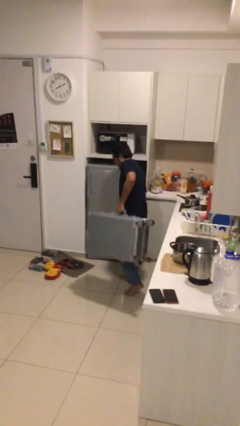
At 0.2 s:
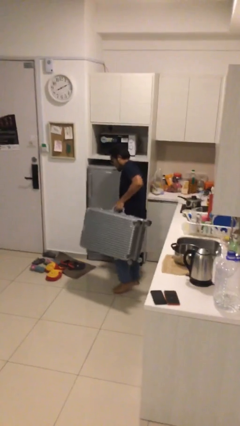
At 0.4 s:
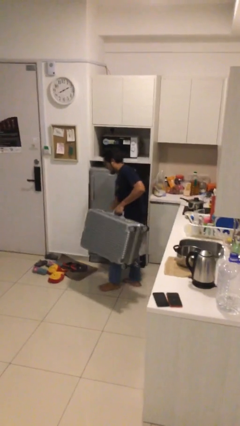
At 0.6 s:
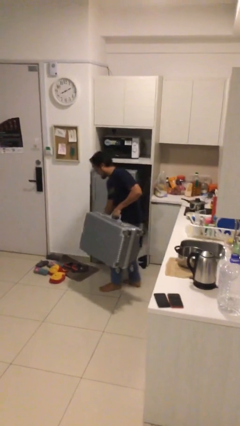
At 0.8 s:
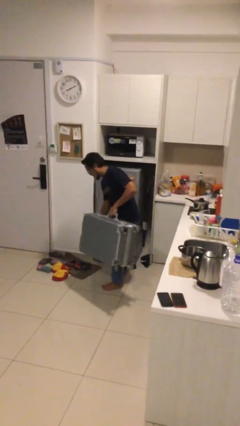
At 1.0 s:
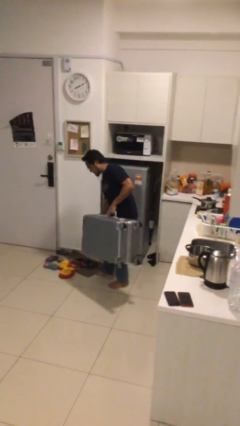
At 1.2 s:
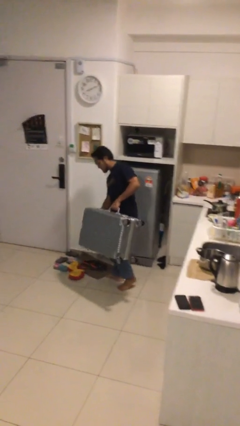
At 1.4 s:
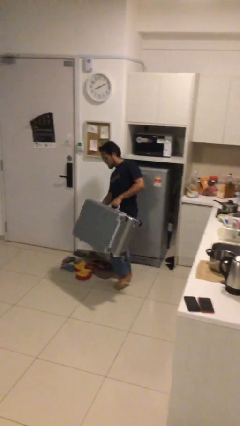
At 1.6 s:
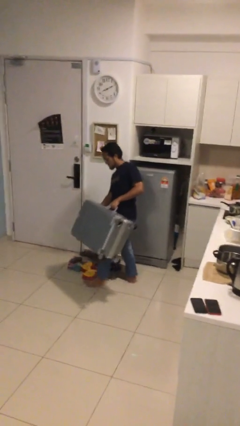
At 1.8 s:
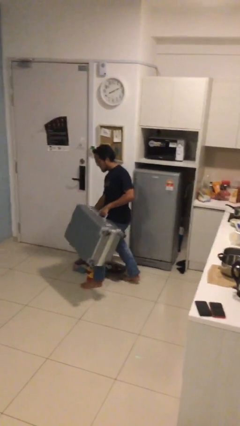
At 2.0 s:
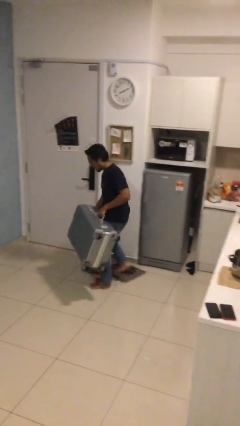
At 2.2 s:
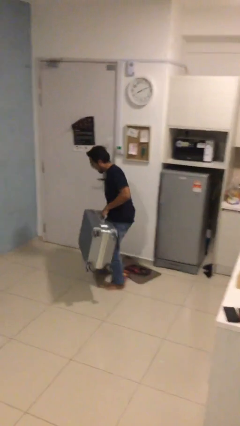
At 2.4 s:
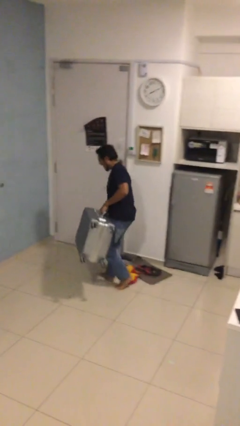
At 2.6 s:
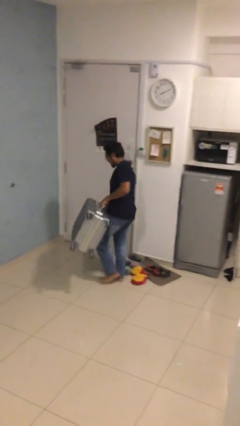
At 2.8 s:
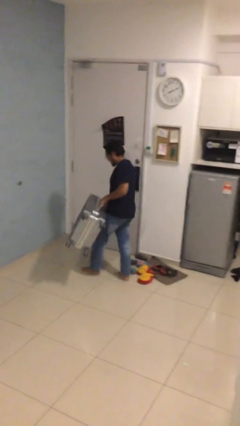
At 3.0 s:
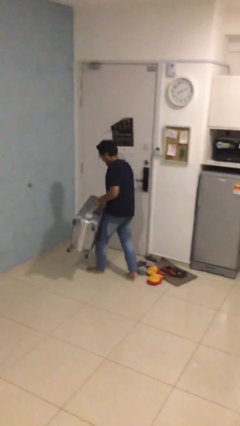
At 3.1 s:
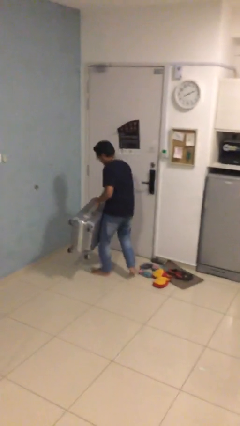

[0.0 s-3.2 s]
person carries heavy object

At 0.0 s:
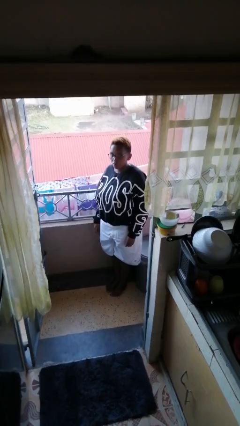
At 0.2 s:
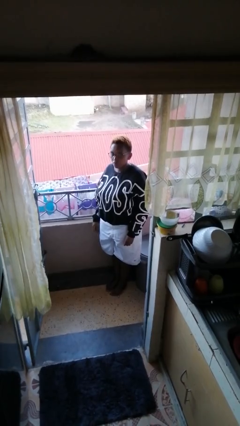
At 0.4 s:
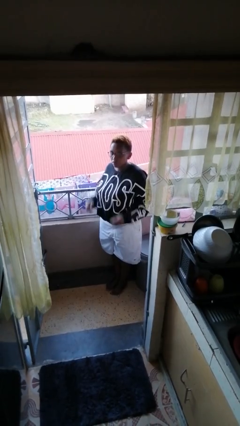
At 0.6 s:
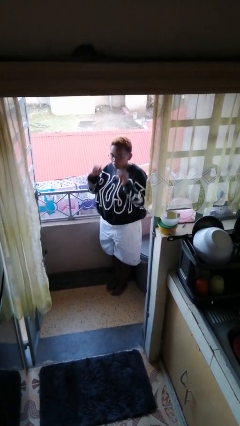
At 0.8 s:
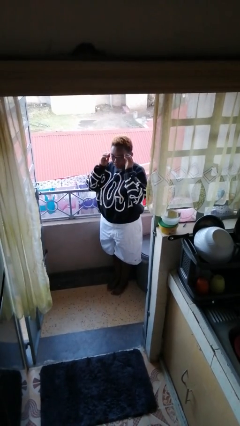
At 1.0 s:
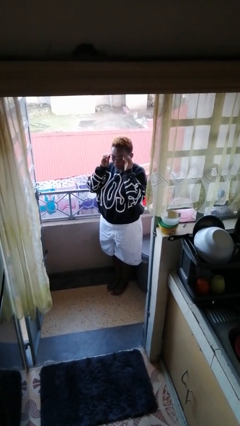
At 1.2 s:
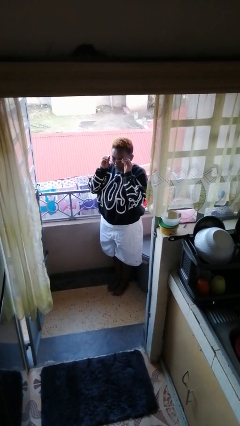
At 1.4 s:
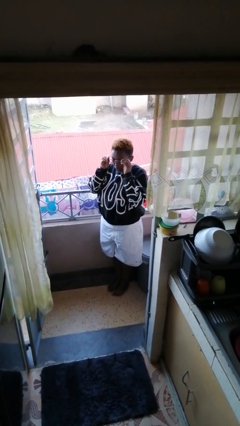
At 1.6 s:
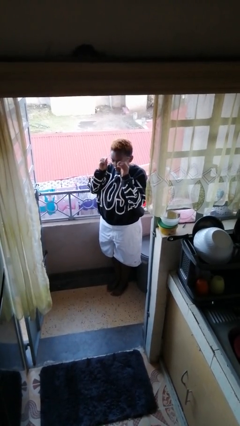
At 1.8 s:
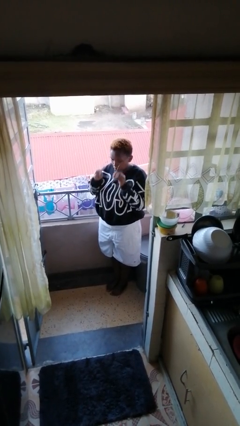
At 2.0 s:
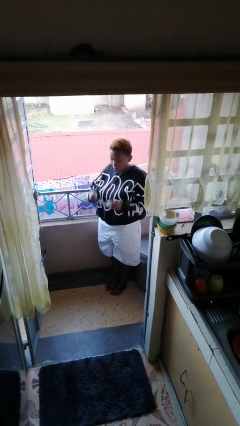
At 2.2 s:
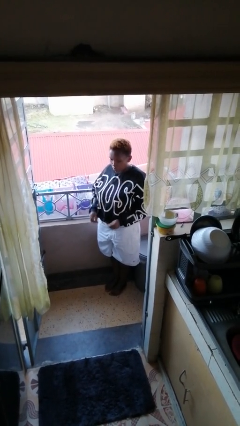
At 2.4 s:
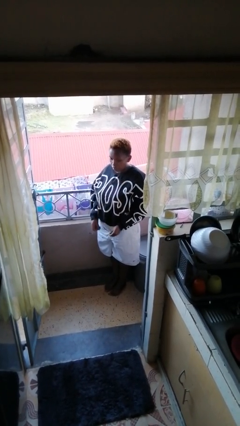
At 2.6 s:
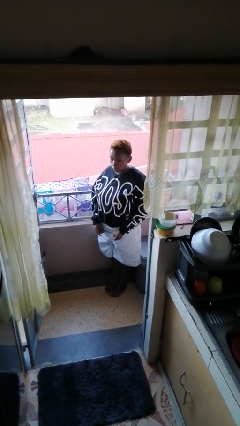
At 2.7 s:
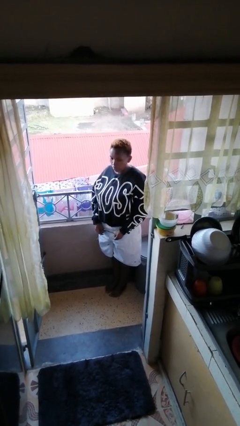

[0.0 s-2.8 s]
person takes off glasses

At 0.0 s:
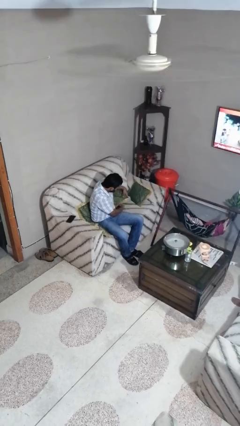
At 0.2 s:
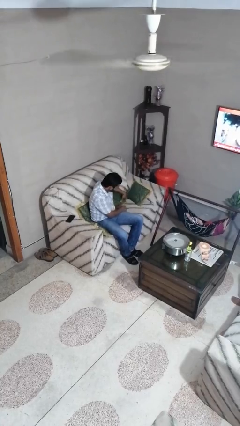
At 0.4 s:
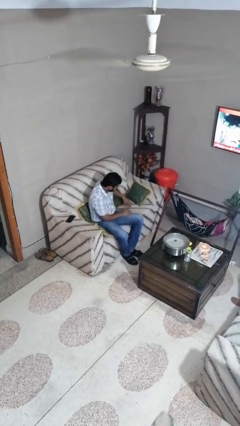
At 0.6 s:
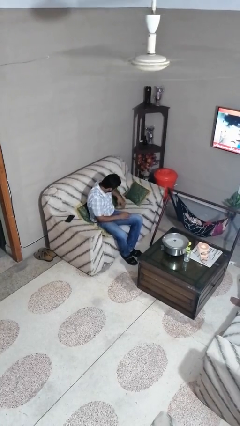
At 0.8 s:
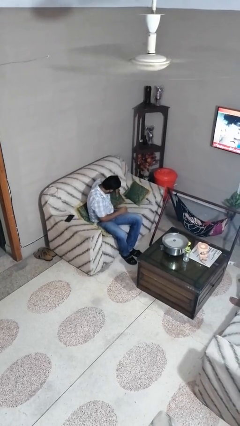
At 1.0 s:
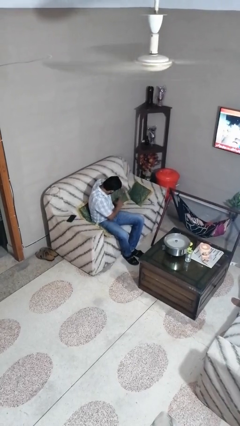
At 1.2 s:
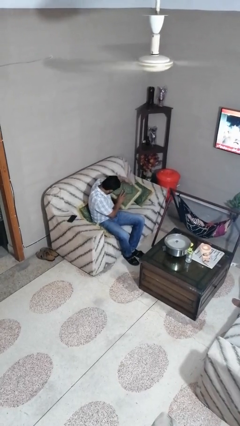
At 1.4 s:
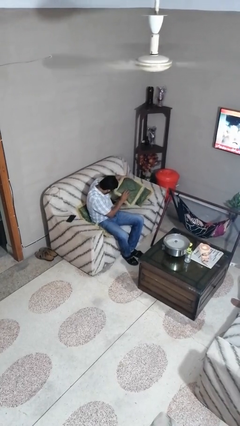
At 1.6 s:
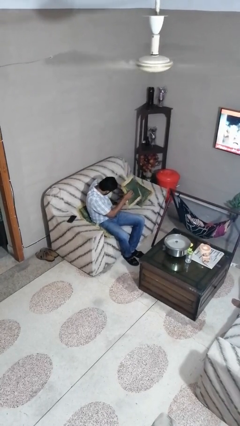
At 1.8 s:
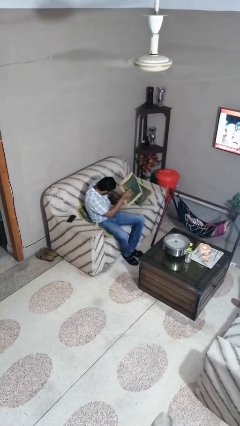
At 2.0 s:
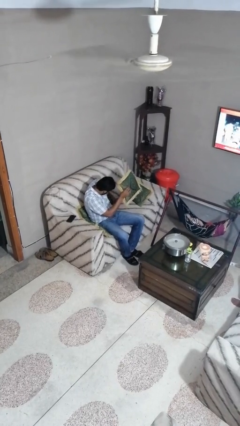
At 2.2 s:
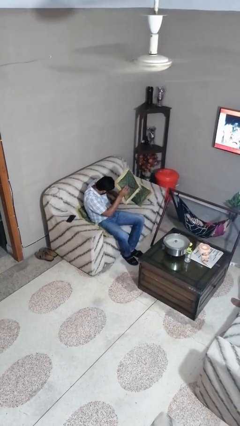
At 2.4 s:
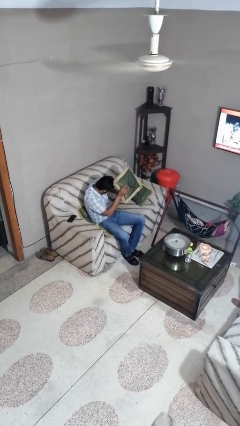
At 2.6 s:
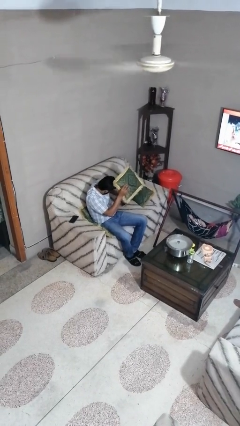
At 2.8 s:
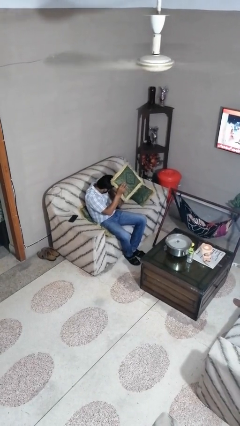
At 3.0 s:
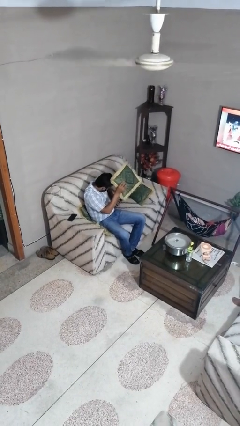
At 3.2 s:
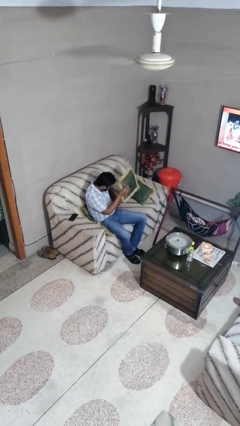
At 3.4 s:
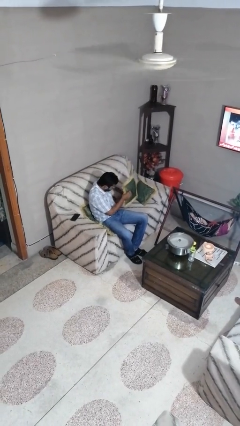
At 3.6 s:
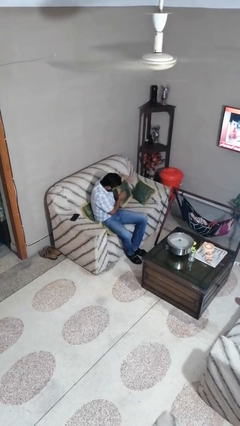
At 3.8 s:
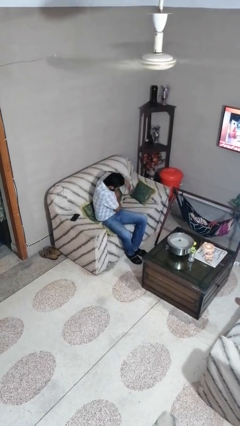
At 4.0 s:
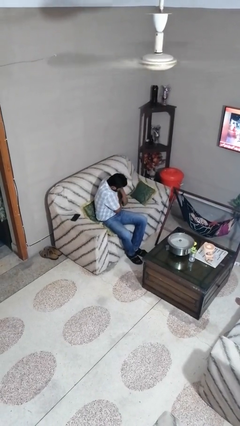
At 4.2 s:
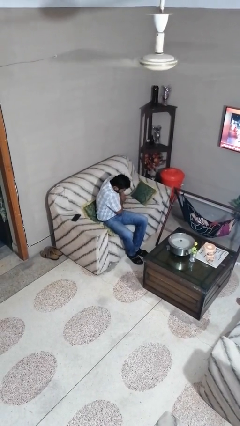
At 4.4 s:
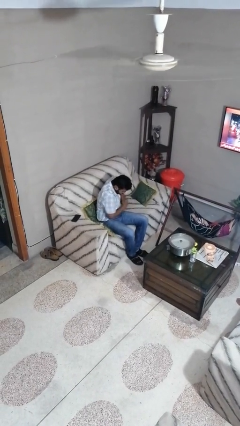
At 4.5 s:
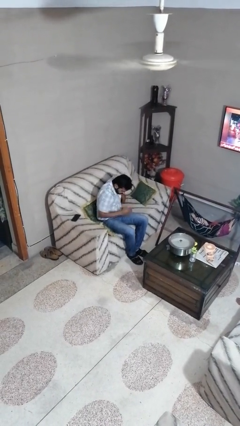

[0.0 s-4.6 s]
person searches in couch

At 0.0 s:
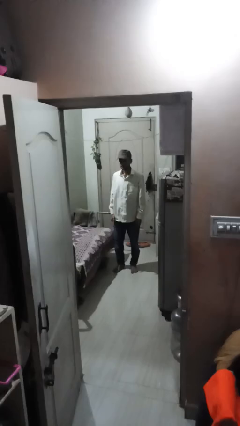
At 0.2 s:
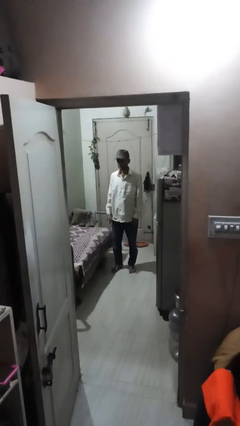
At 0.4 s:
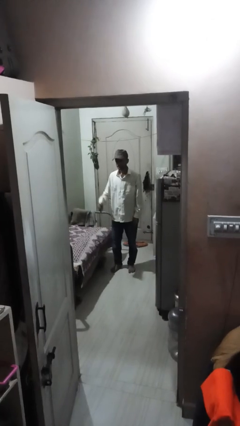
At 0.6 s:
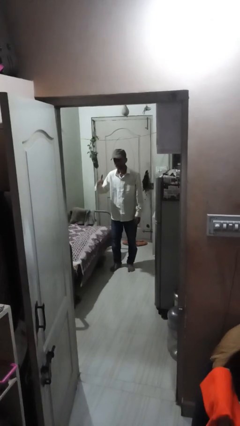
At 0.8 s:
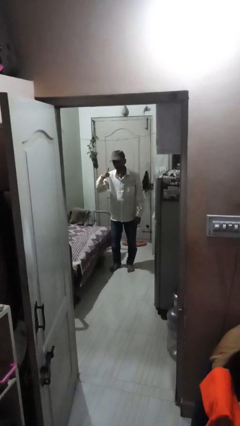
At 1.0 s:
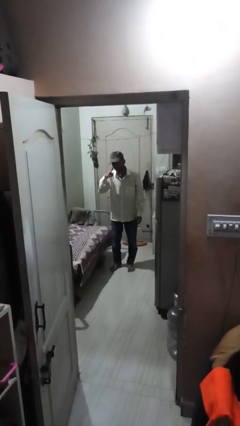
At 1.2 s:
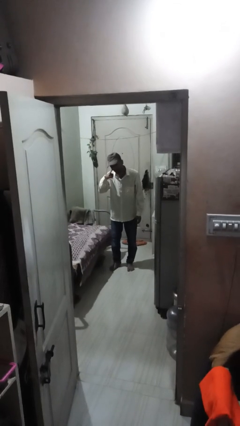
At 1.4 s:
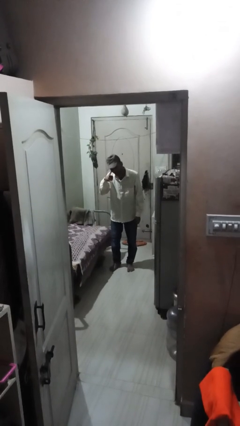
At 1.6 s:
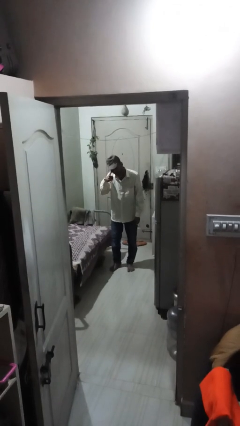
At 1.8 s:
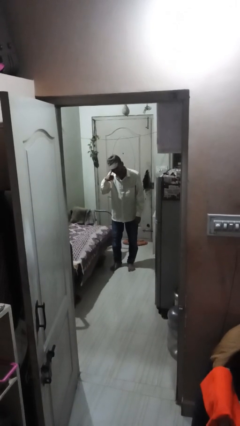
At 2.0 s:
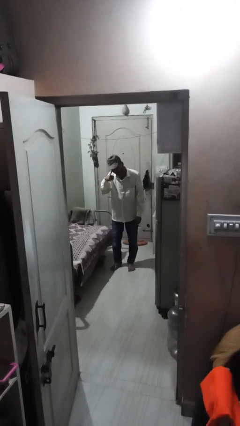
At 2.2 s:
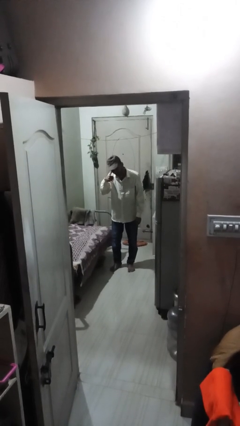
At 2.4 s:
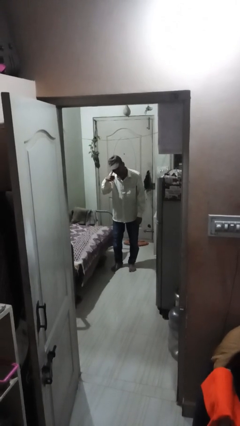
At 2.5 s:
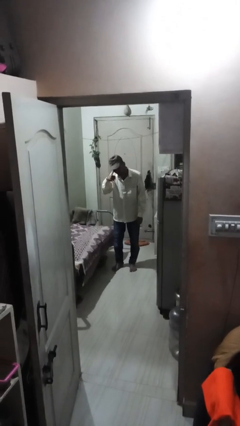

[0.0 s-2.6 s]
person gestures call me

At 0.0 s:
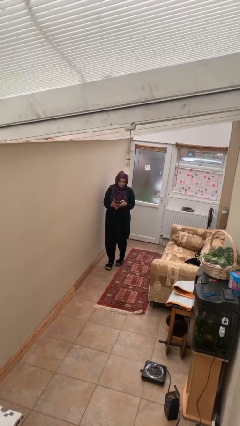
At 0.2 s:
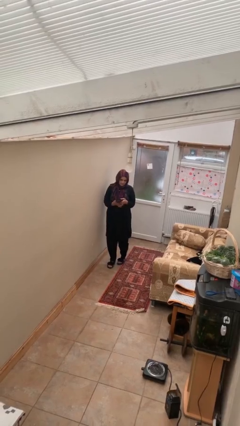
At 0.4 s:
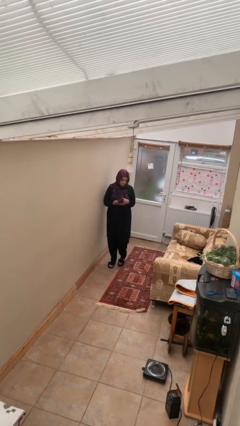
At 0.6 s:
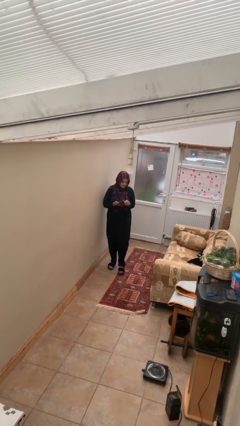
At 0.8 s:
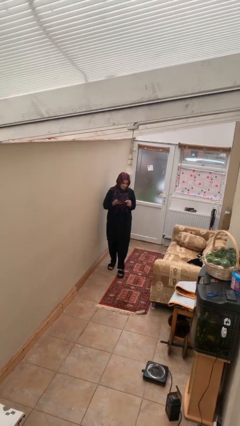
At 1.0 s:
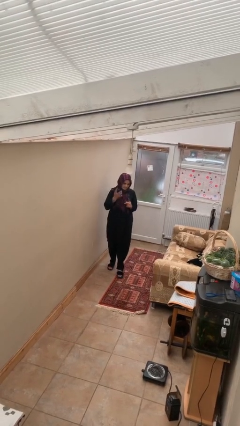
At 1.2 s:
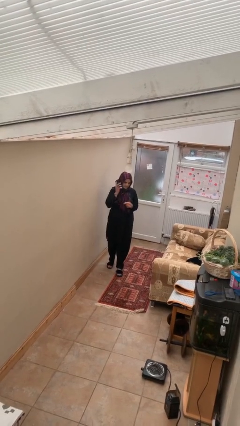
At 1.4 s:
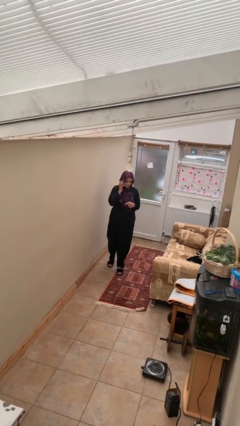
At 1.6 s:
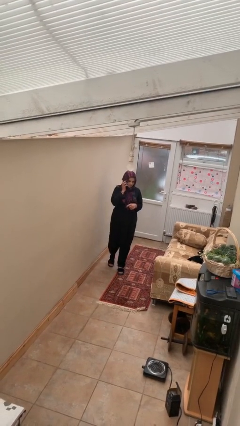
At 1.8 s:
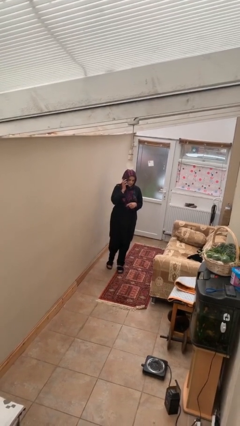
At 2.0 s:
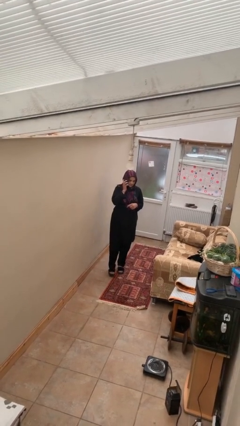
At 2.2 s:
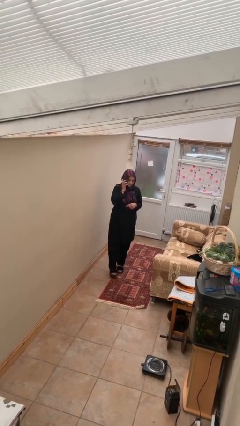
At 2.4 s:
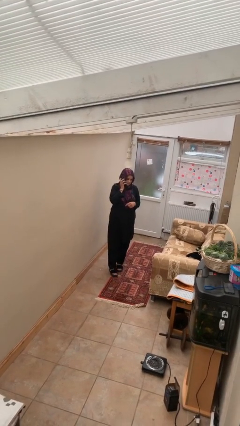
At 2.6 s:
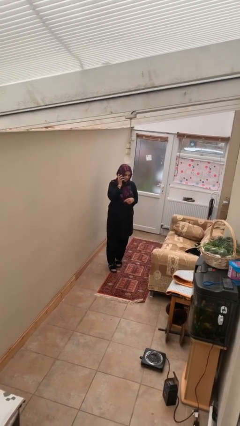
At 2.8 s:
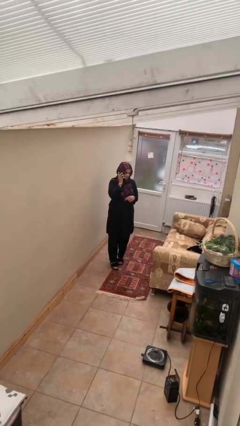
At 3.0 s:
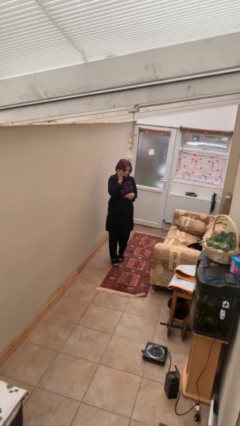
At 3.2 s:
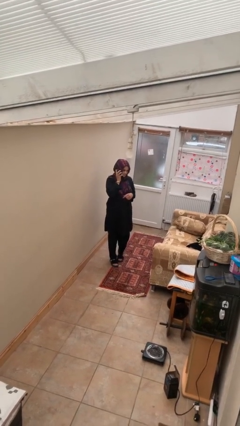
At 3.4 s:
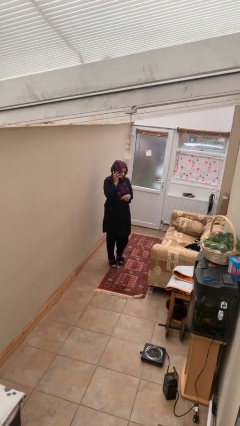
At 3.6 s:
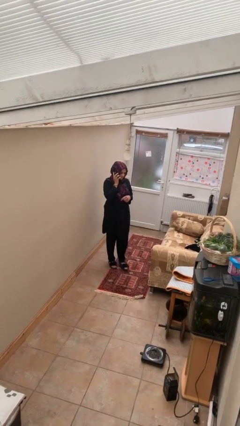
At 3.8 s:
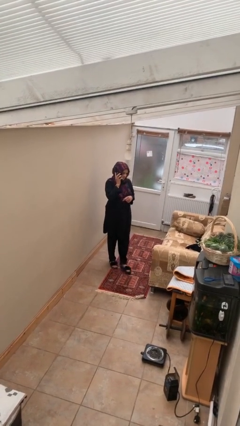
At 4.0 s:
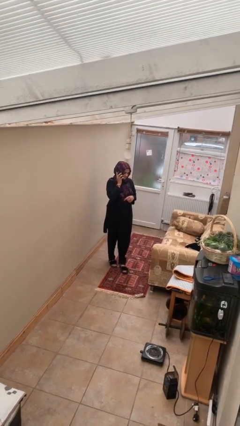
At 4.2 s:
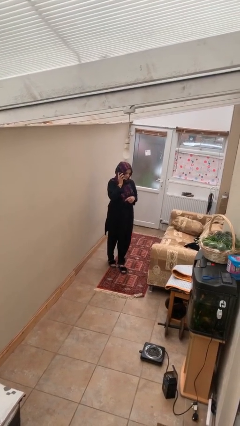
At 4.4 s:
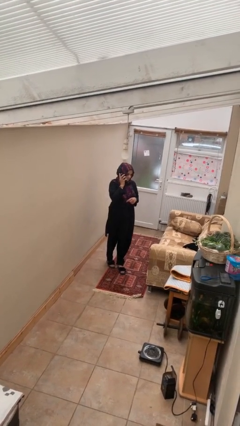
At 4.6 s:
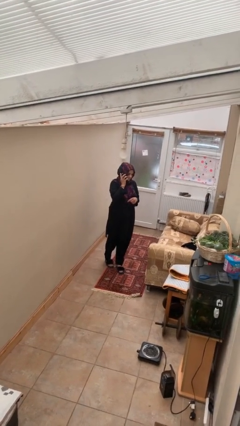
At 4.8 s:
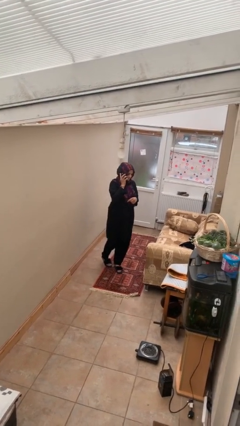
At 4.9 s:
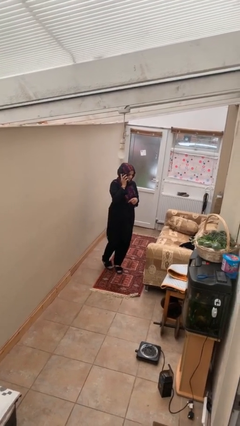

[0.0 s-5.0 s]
person talks on phone
